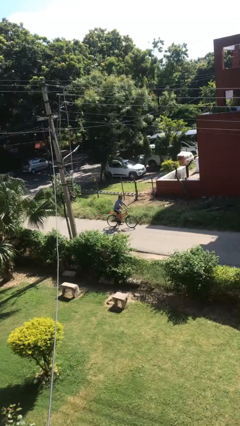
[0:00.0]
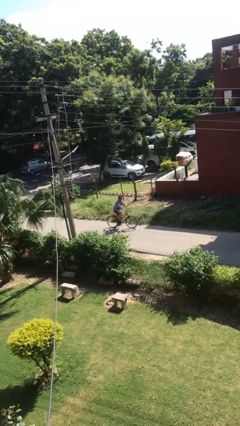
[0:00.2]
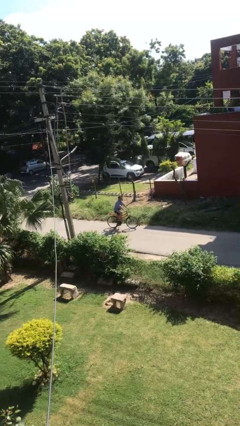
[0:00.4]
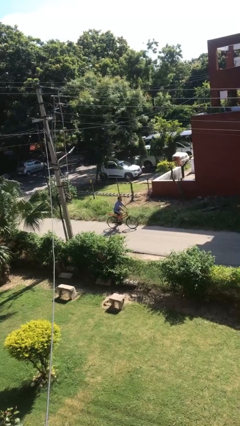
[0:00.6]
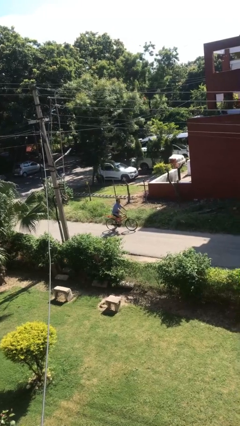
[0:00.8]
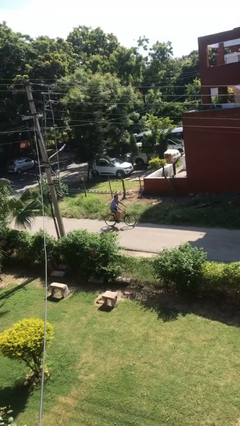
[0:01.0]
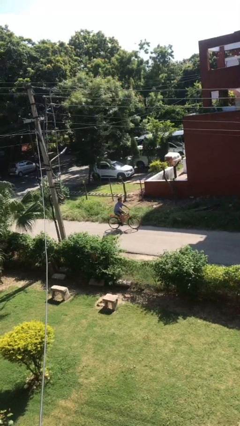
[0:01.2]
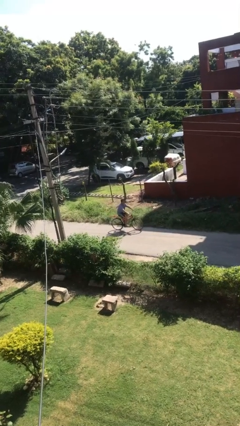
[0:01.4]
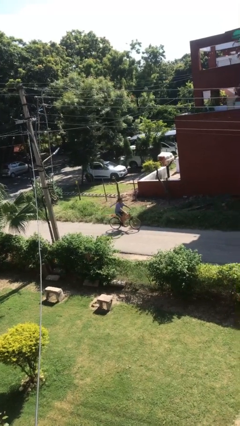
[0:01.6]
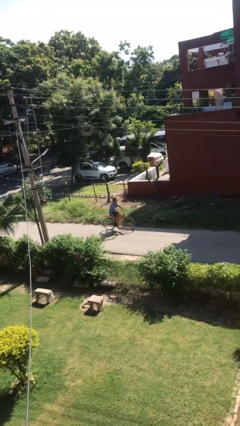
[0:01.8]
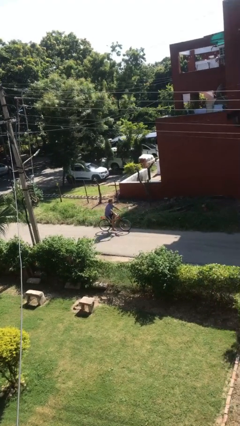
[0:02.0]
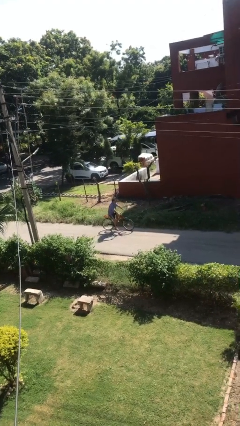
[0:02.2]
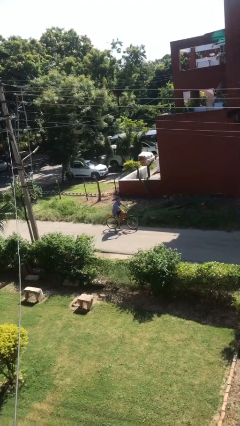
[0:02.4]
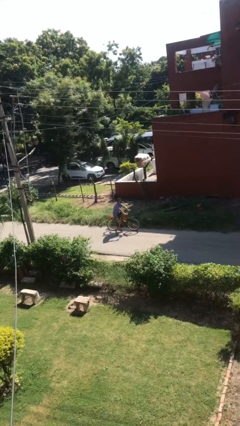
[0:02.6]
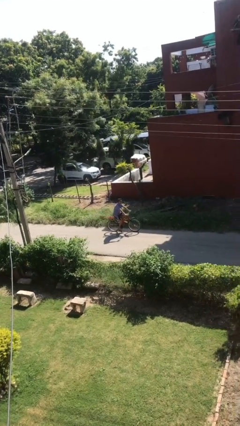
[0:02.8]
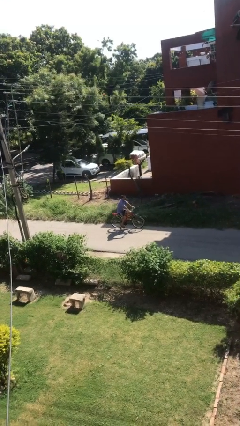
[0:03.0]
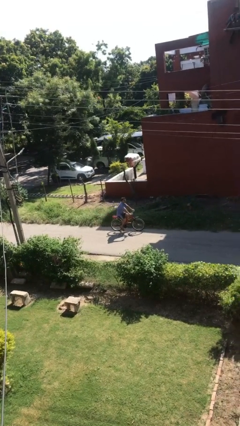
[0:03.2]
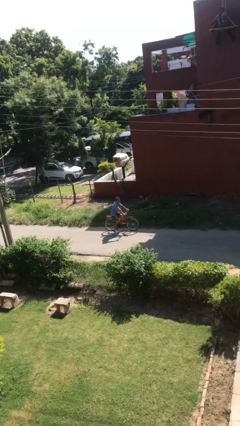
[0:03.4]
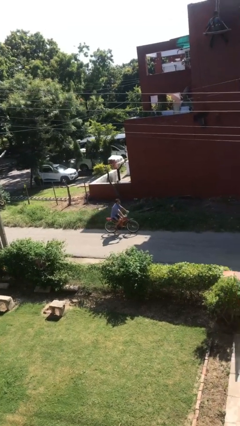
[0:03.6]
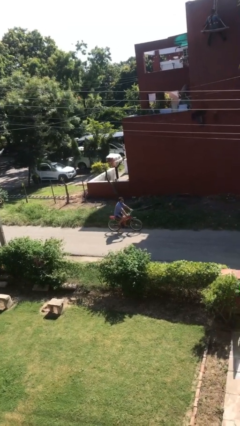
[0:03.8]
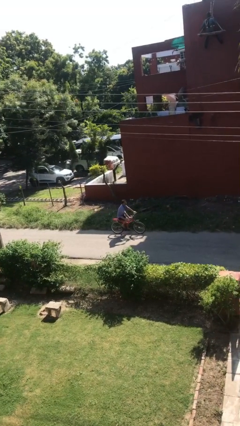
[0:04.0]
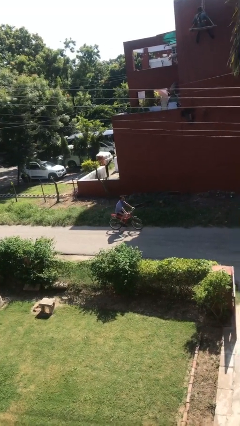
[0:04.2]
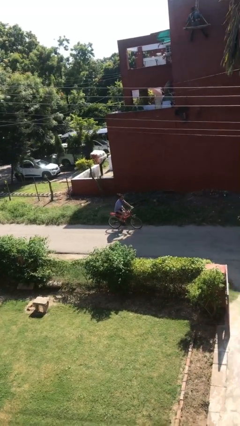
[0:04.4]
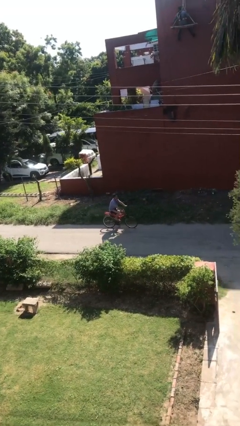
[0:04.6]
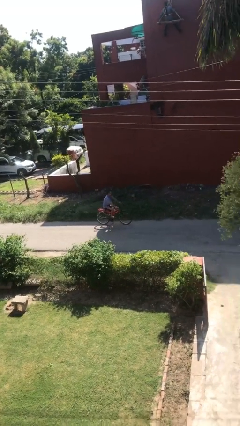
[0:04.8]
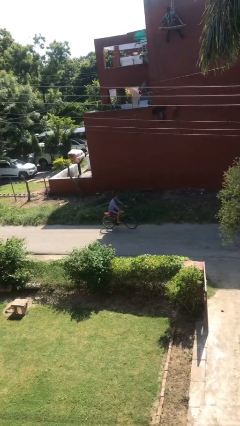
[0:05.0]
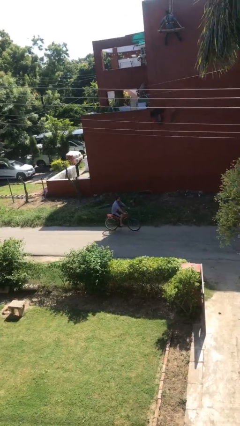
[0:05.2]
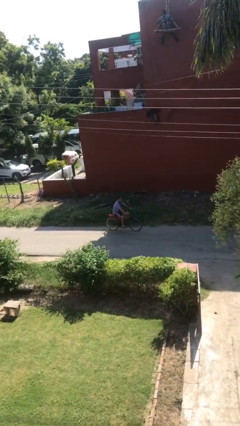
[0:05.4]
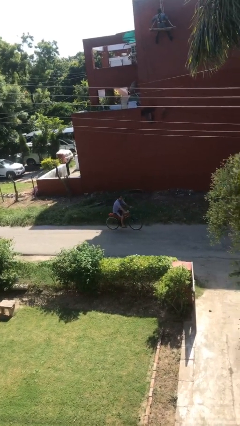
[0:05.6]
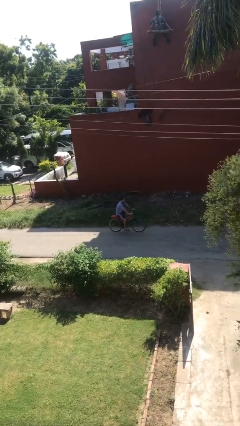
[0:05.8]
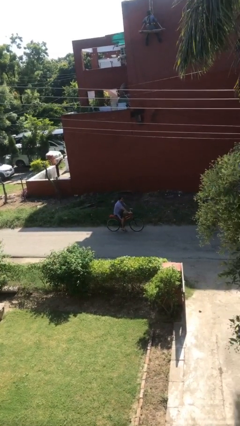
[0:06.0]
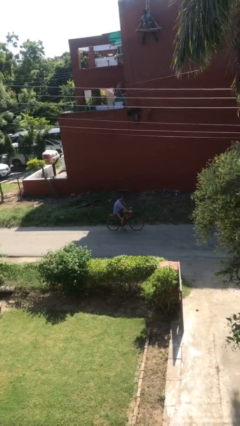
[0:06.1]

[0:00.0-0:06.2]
person rides bicycle

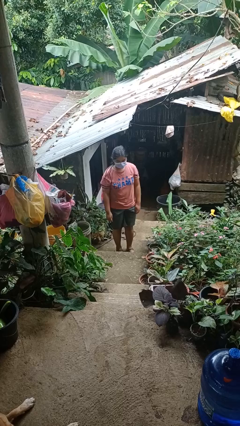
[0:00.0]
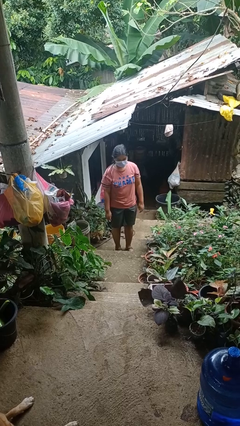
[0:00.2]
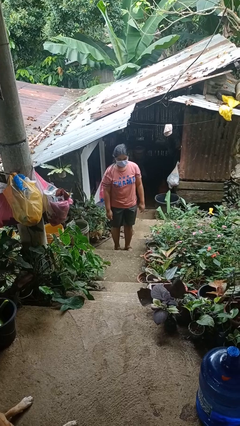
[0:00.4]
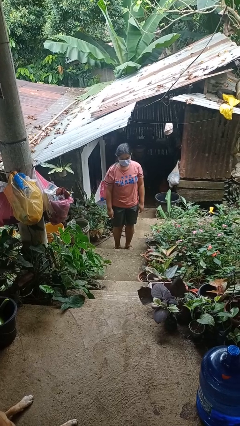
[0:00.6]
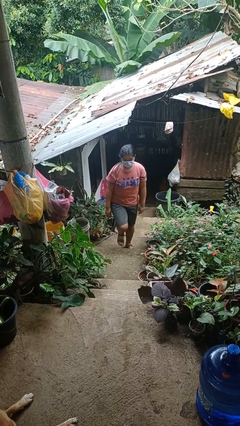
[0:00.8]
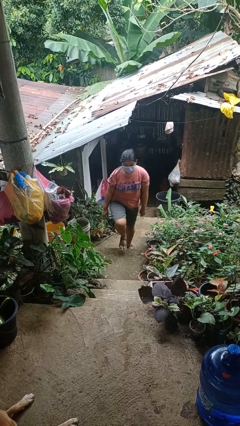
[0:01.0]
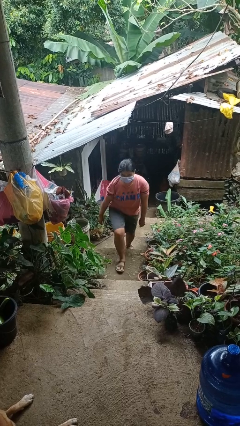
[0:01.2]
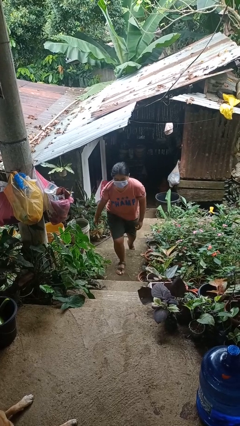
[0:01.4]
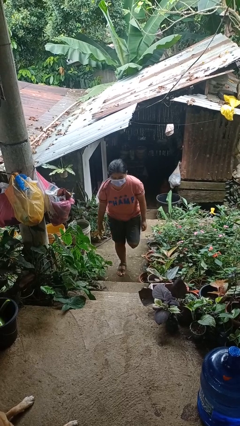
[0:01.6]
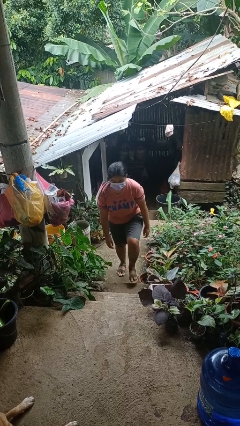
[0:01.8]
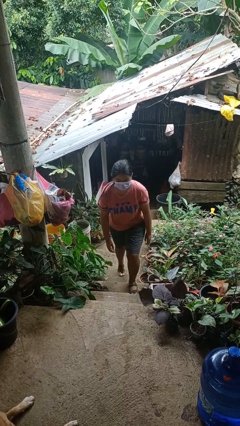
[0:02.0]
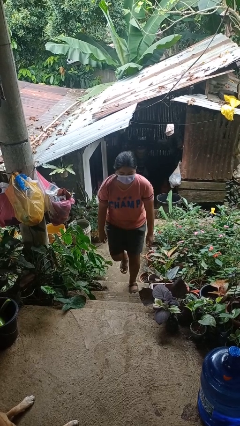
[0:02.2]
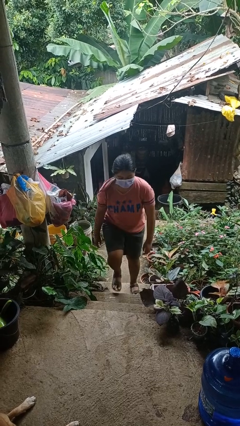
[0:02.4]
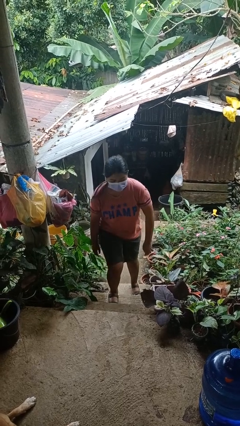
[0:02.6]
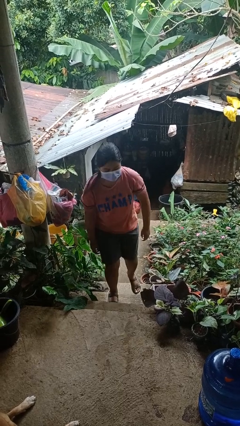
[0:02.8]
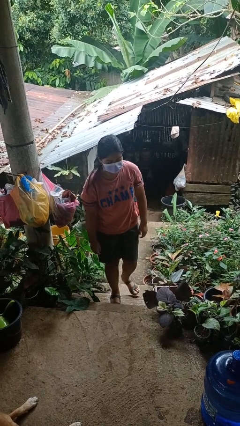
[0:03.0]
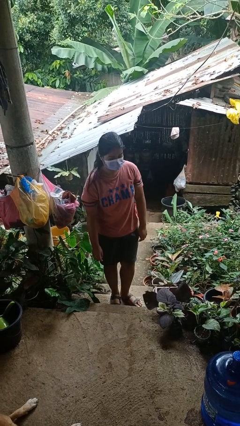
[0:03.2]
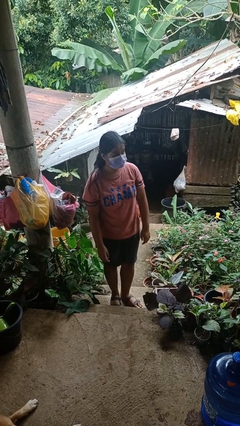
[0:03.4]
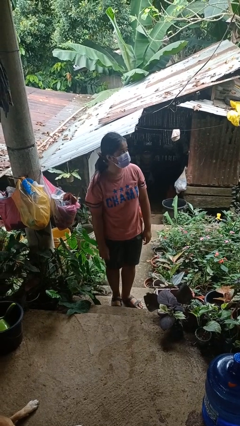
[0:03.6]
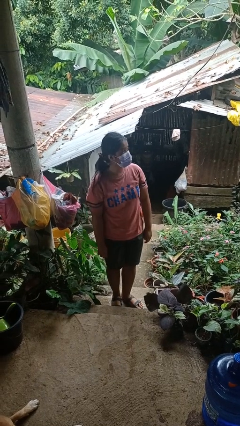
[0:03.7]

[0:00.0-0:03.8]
person climbs up stairs

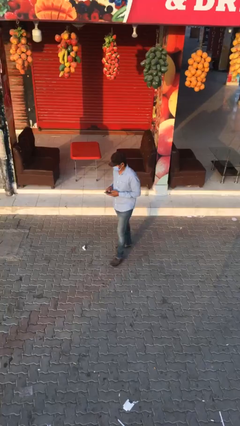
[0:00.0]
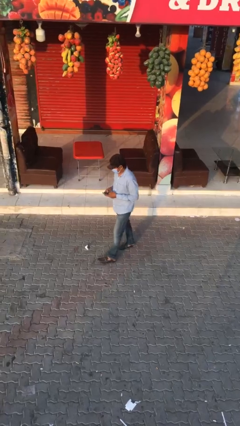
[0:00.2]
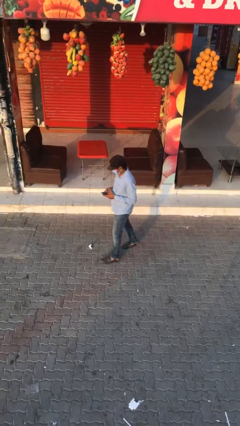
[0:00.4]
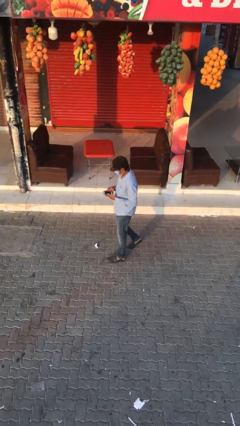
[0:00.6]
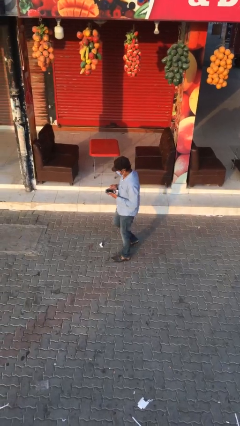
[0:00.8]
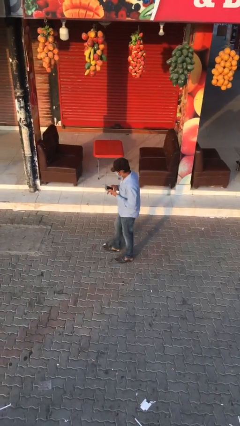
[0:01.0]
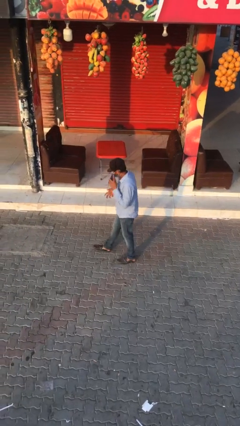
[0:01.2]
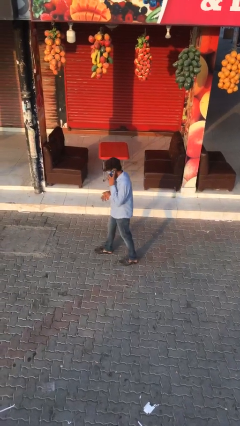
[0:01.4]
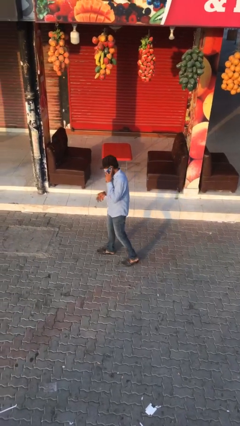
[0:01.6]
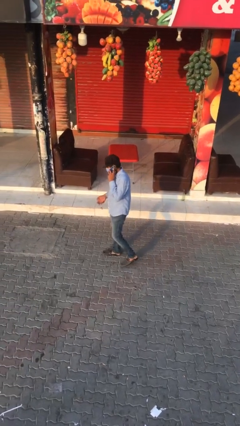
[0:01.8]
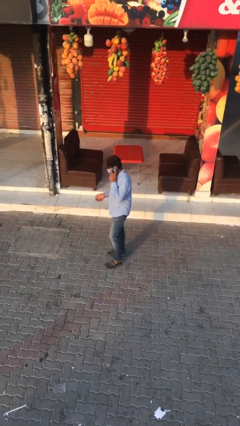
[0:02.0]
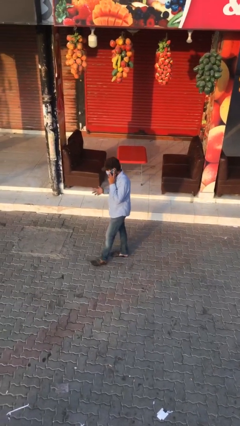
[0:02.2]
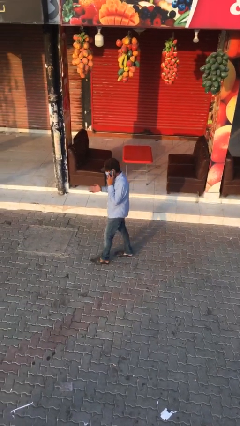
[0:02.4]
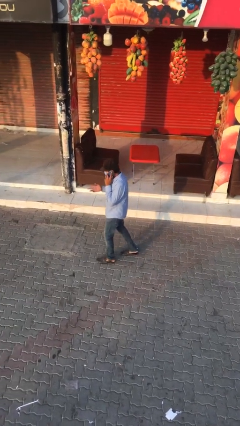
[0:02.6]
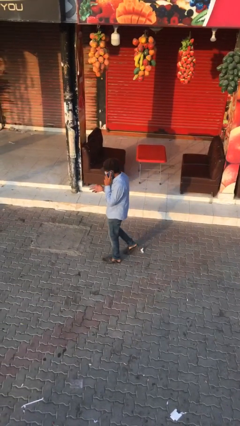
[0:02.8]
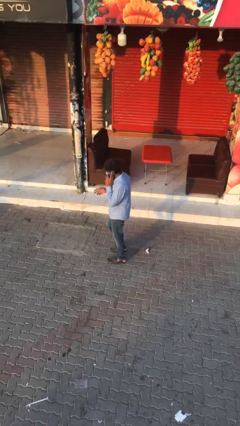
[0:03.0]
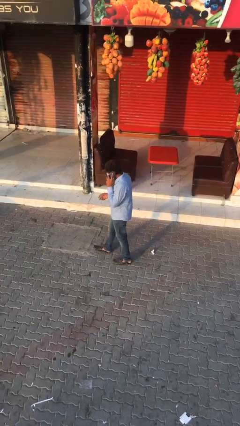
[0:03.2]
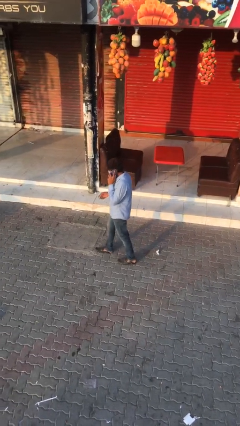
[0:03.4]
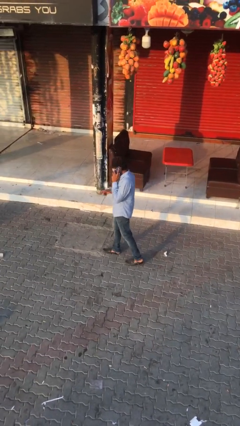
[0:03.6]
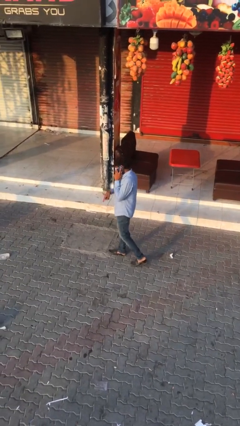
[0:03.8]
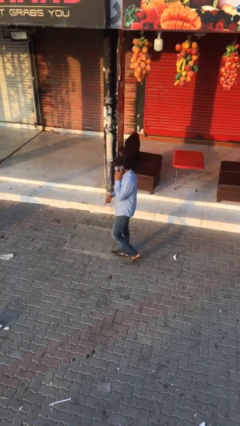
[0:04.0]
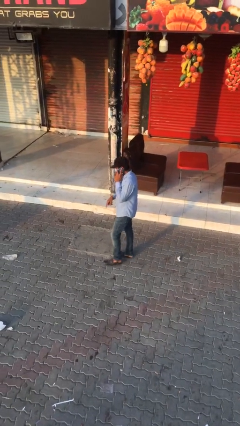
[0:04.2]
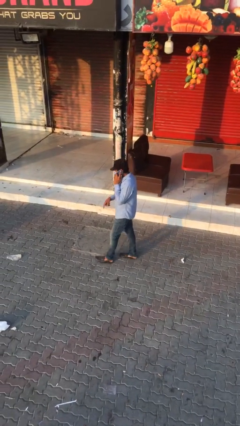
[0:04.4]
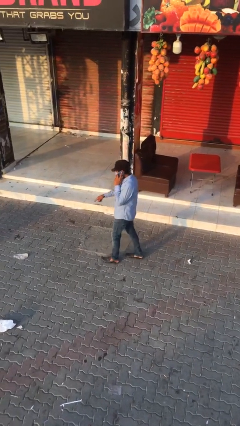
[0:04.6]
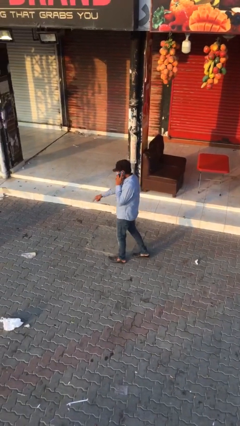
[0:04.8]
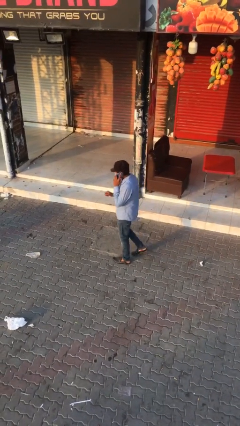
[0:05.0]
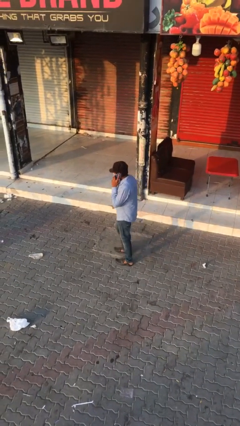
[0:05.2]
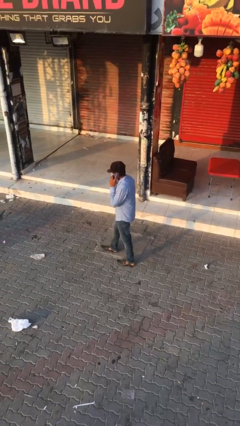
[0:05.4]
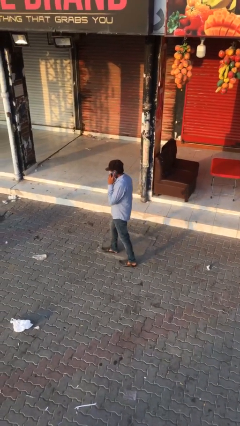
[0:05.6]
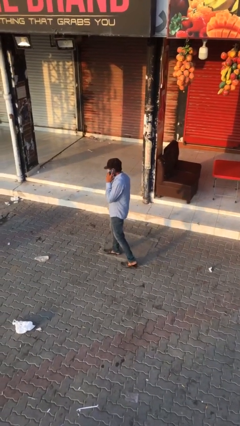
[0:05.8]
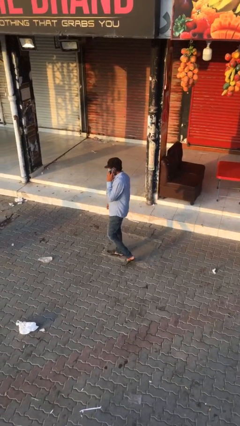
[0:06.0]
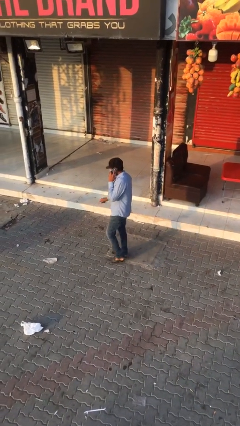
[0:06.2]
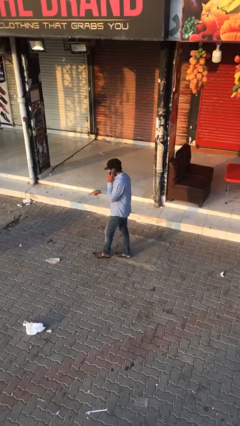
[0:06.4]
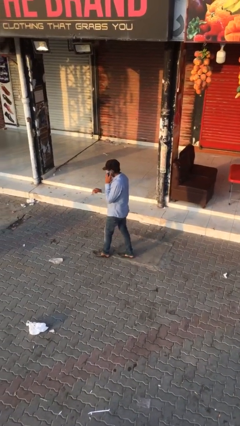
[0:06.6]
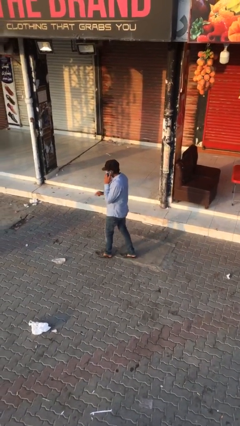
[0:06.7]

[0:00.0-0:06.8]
person talks on phone

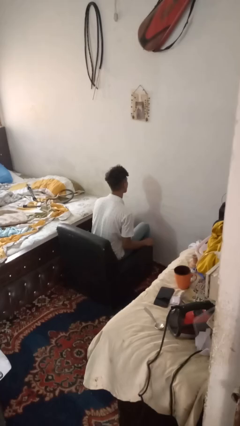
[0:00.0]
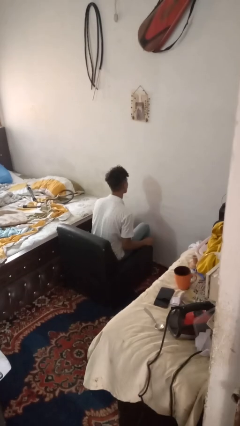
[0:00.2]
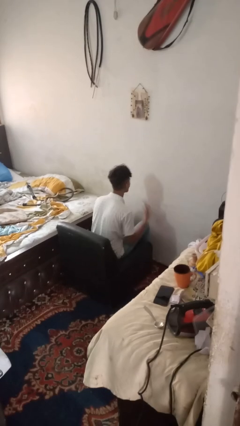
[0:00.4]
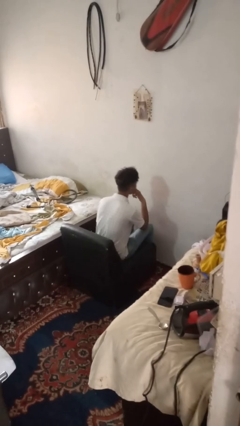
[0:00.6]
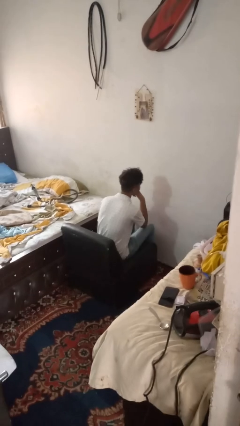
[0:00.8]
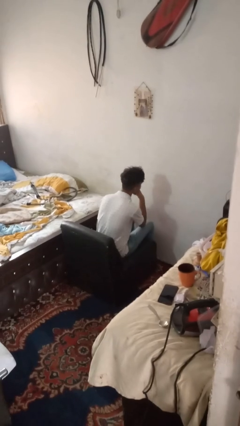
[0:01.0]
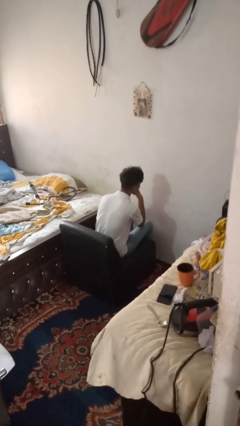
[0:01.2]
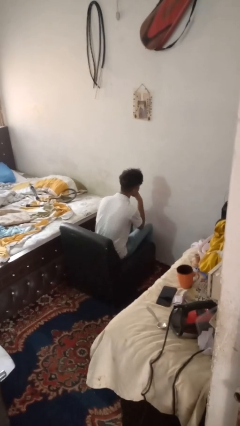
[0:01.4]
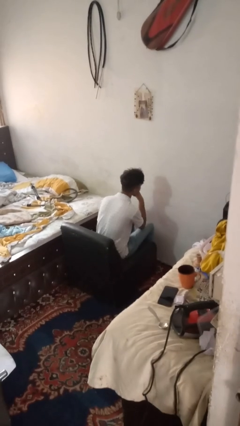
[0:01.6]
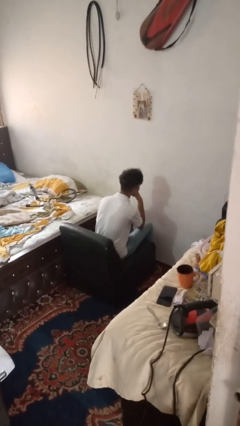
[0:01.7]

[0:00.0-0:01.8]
person strokes chin
